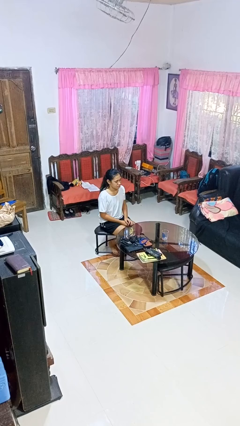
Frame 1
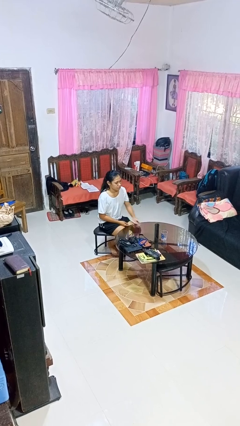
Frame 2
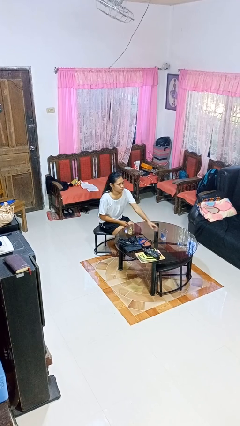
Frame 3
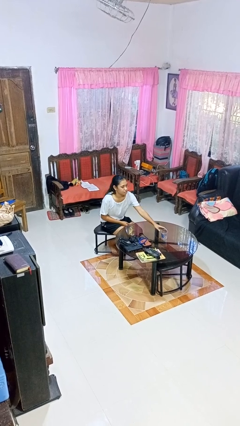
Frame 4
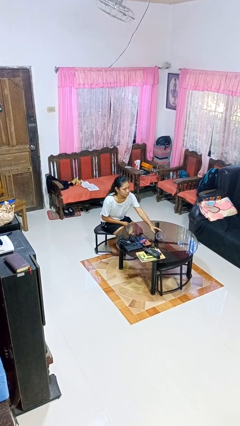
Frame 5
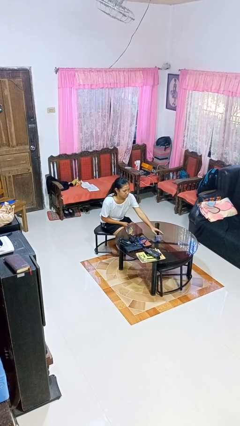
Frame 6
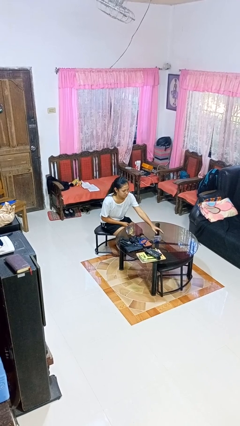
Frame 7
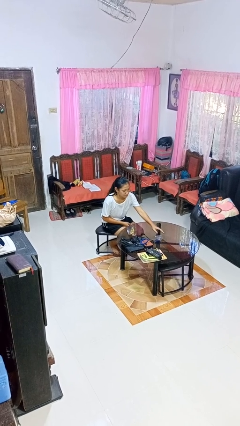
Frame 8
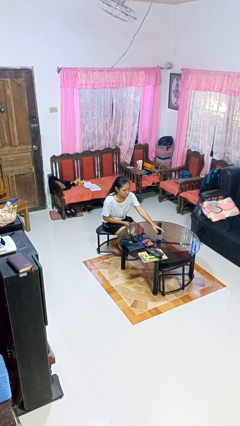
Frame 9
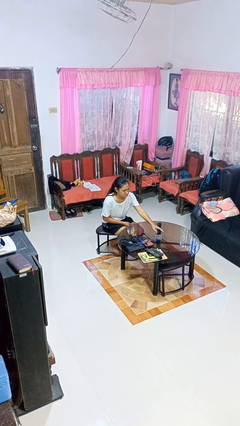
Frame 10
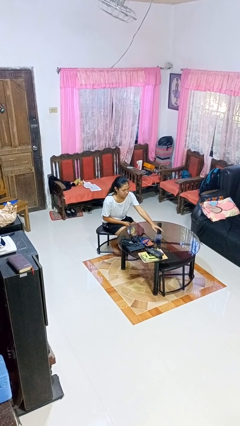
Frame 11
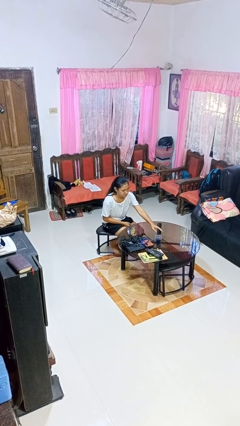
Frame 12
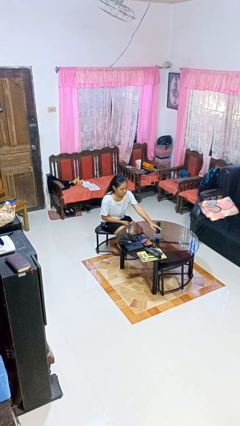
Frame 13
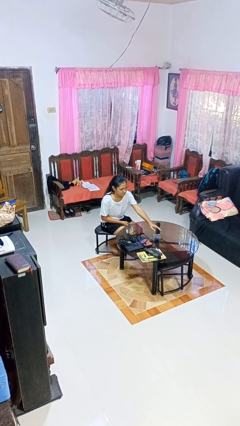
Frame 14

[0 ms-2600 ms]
person knocks over glass

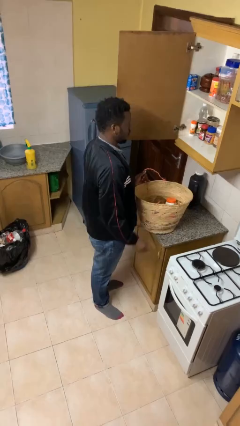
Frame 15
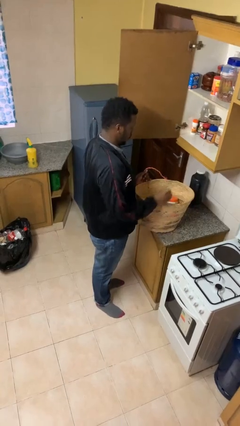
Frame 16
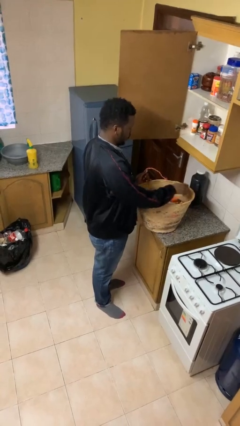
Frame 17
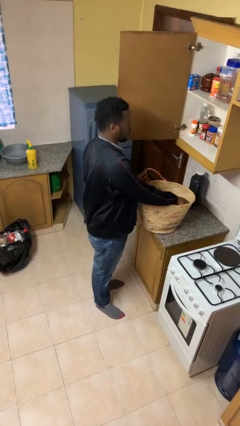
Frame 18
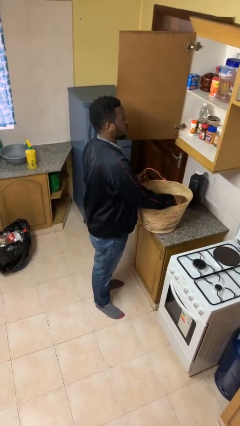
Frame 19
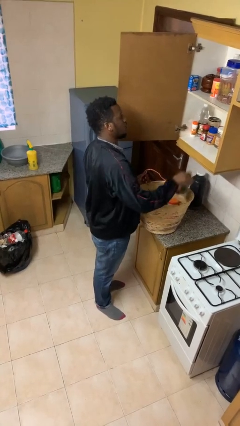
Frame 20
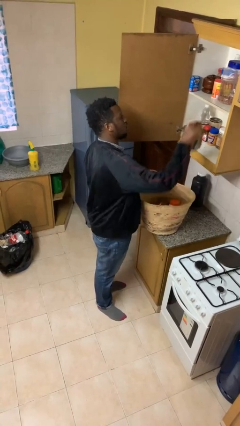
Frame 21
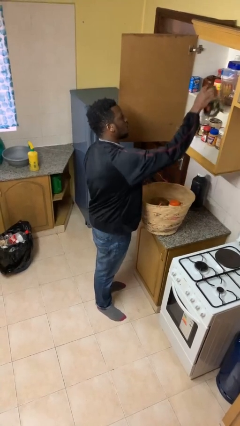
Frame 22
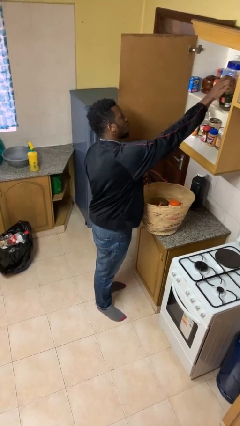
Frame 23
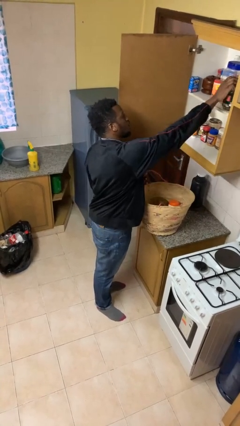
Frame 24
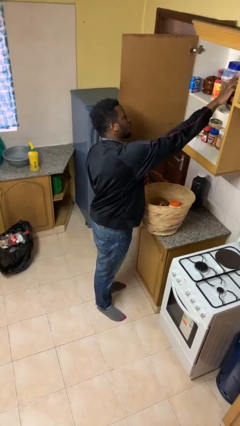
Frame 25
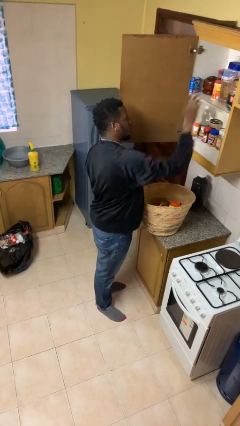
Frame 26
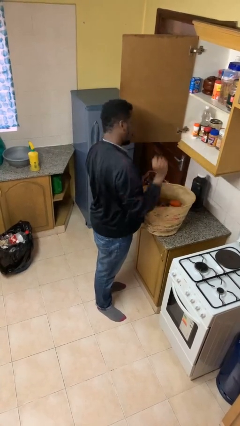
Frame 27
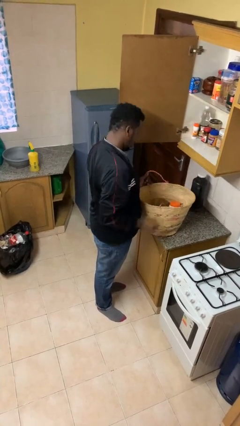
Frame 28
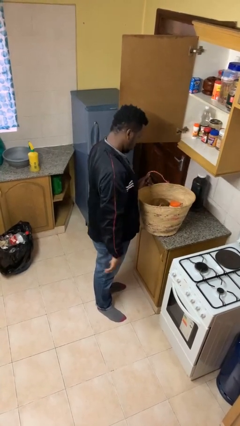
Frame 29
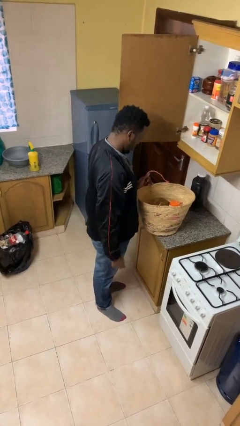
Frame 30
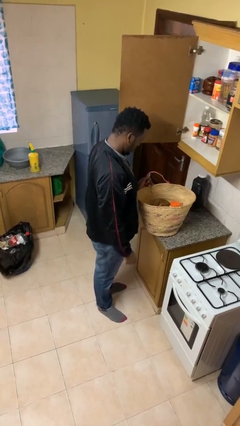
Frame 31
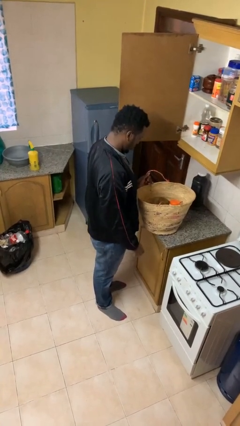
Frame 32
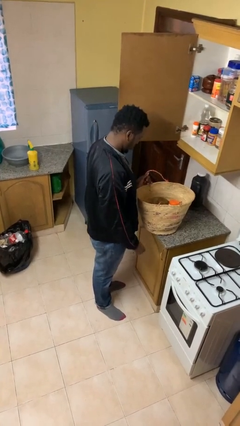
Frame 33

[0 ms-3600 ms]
person loads groceries into cabinet

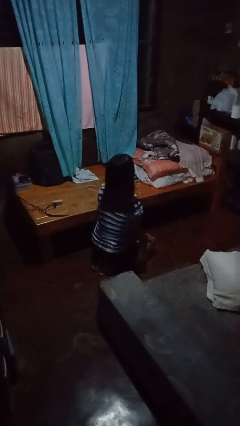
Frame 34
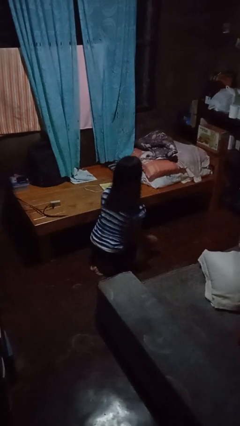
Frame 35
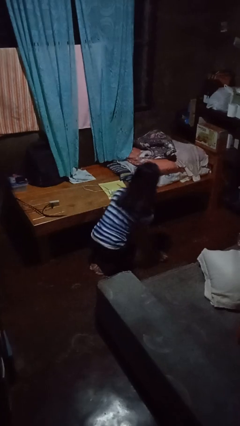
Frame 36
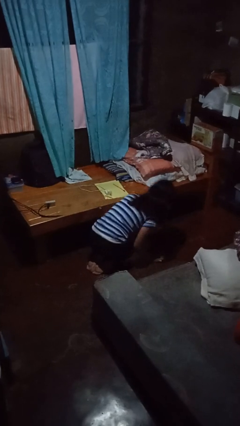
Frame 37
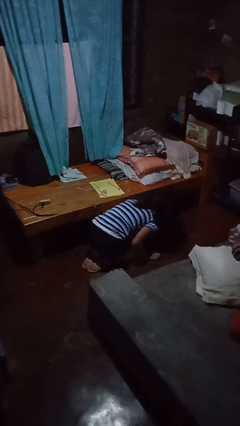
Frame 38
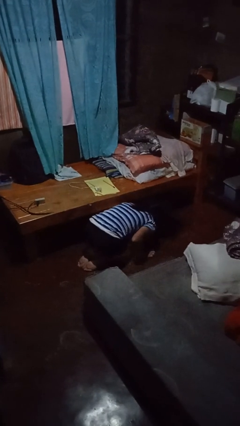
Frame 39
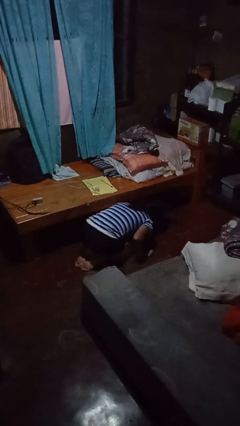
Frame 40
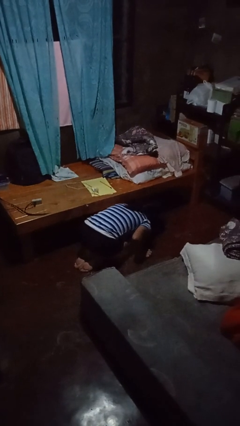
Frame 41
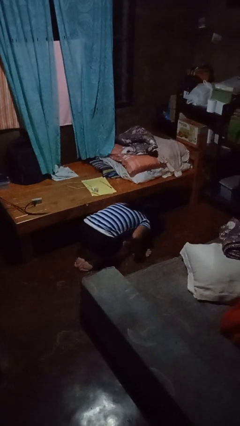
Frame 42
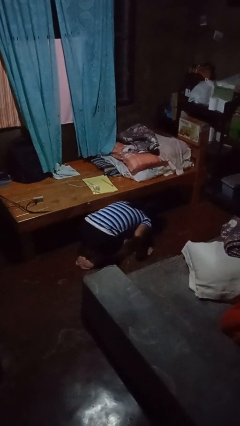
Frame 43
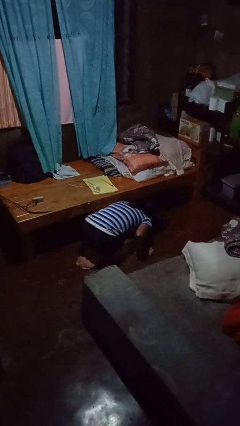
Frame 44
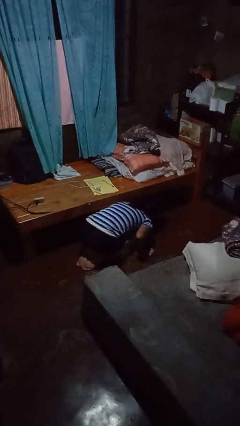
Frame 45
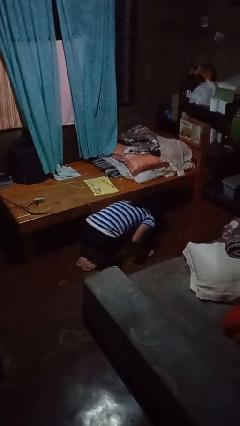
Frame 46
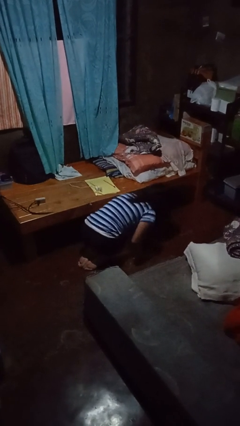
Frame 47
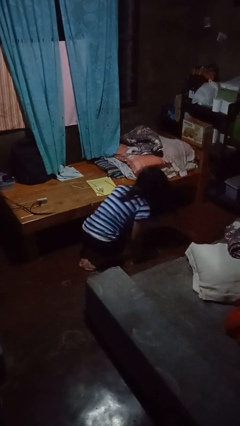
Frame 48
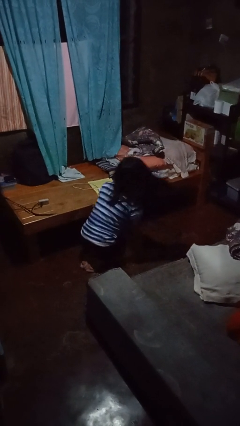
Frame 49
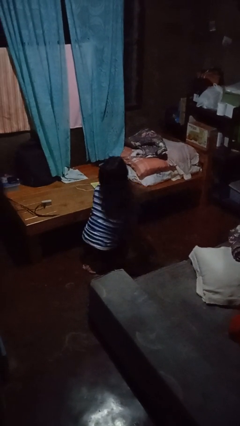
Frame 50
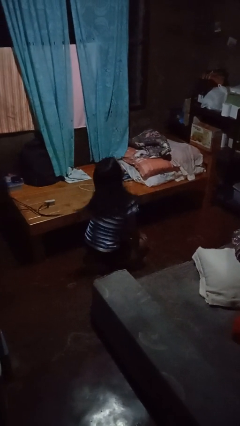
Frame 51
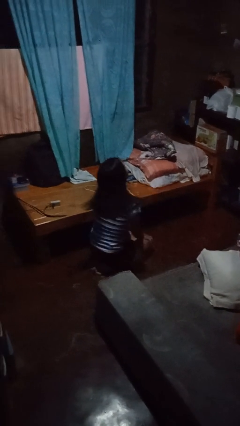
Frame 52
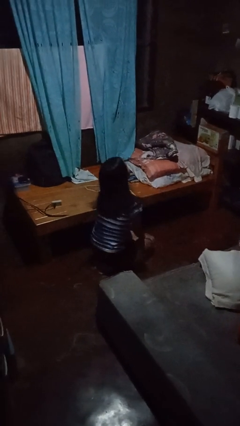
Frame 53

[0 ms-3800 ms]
person searches under bed

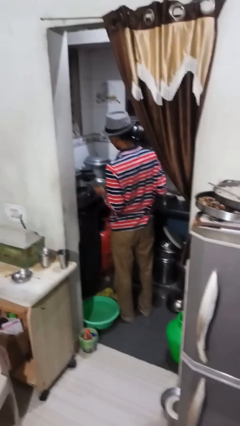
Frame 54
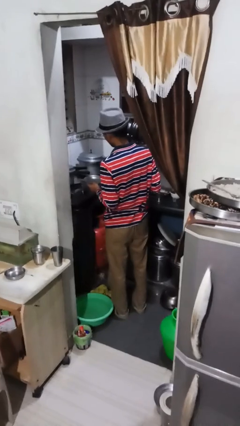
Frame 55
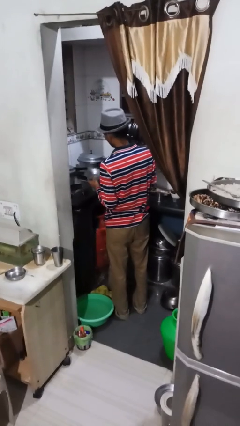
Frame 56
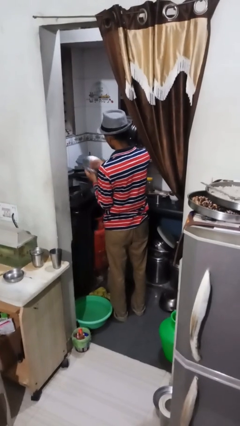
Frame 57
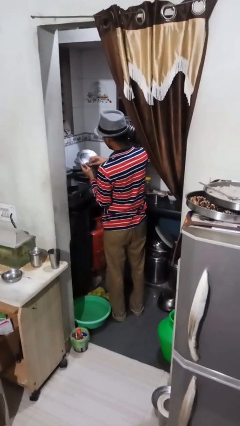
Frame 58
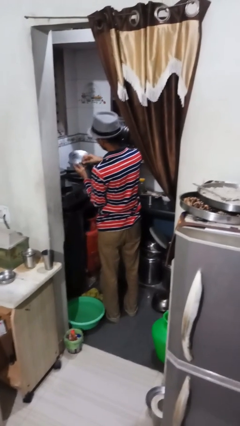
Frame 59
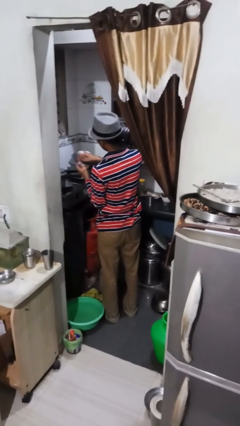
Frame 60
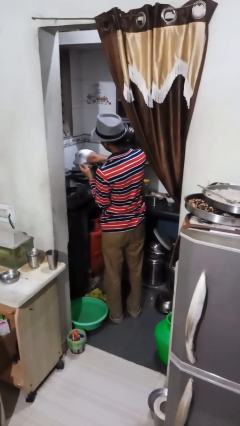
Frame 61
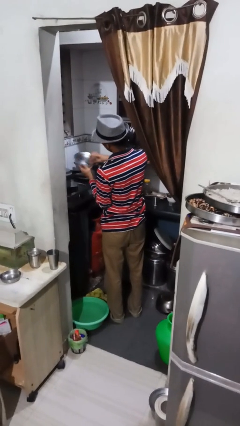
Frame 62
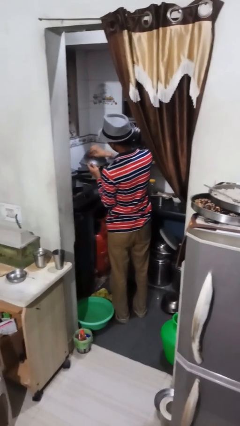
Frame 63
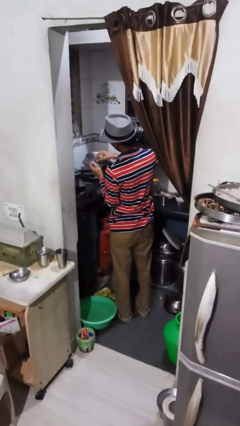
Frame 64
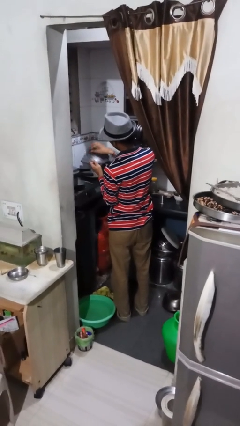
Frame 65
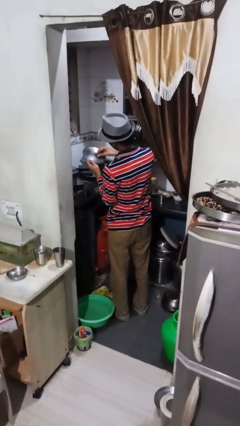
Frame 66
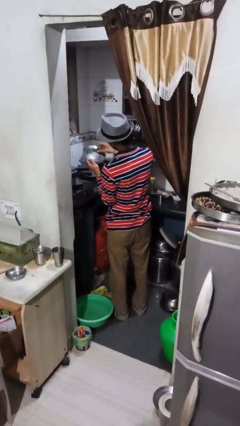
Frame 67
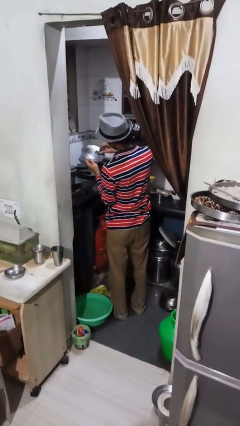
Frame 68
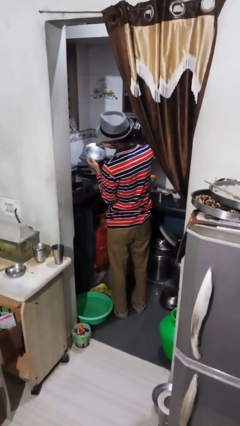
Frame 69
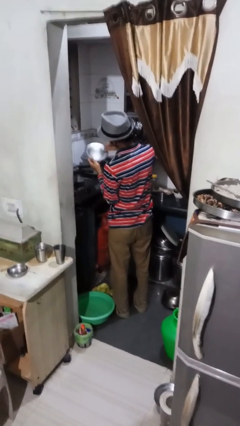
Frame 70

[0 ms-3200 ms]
person washes dish

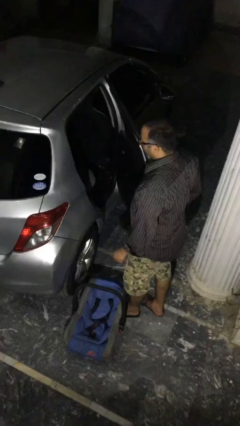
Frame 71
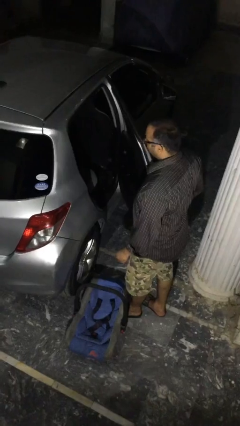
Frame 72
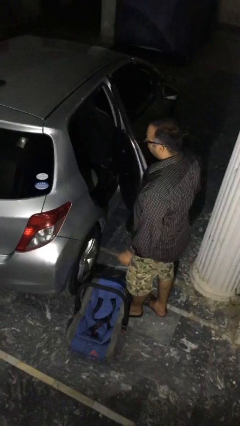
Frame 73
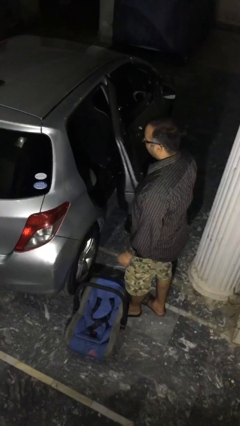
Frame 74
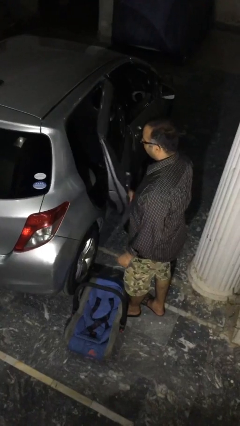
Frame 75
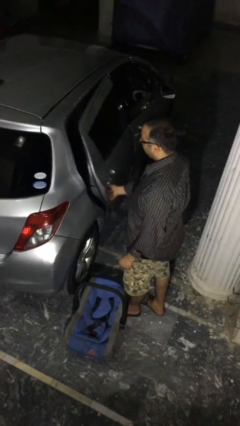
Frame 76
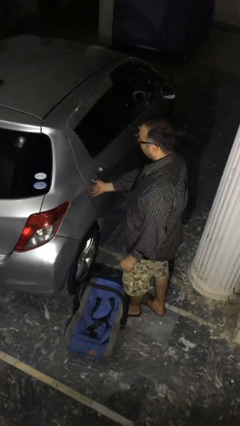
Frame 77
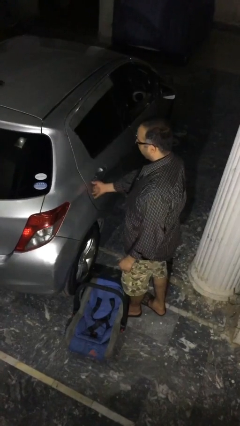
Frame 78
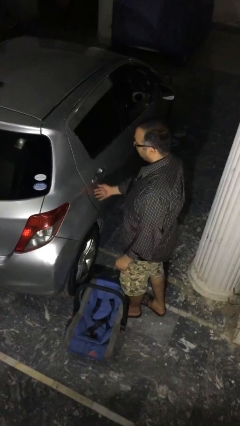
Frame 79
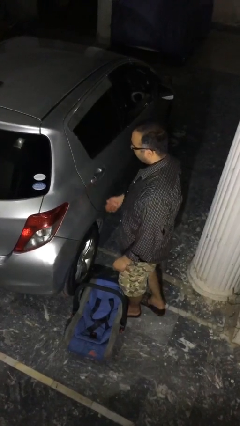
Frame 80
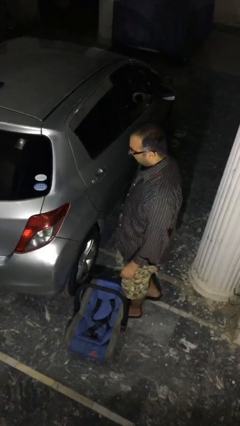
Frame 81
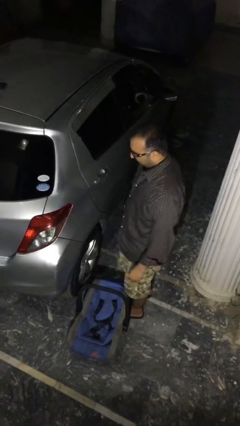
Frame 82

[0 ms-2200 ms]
person closes car door

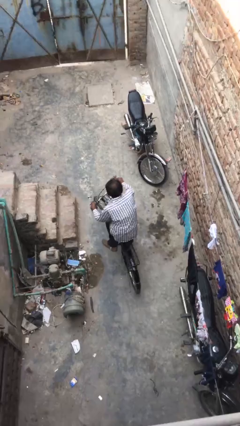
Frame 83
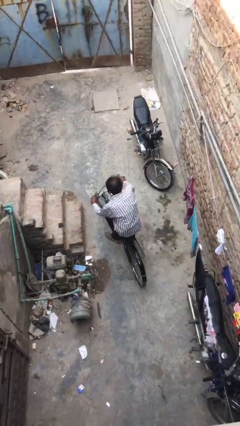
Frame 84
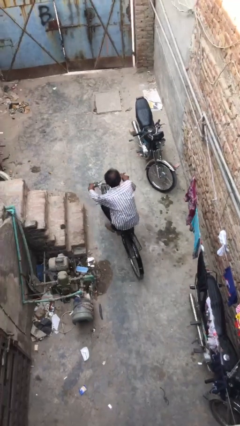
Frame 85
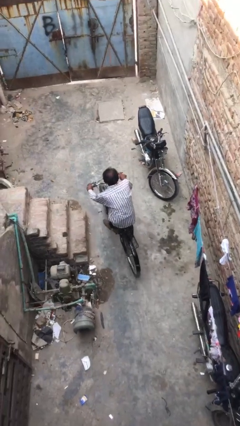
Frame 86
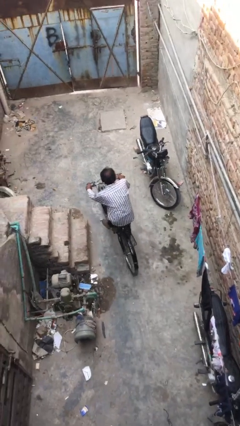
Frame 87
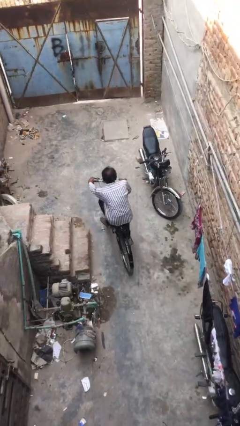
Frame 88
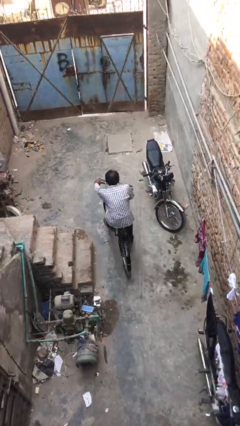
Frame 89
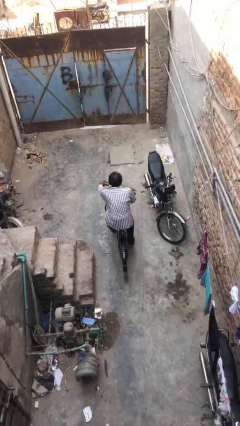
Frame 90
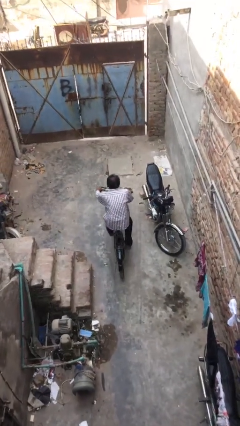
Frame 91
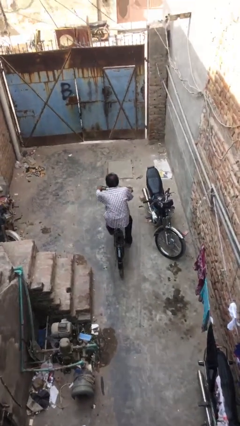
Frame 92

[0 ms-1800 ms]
person rides bicycle

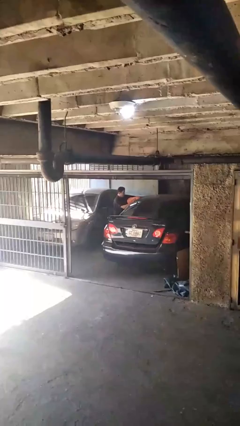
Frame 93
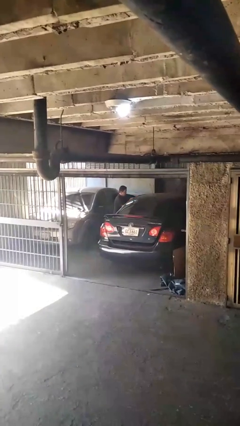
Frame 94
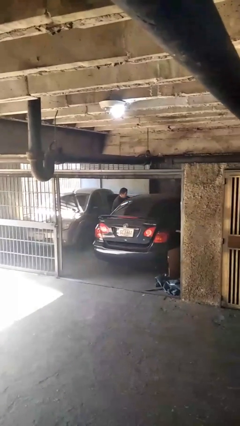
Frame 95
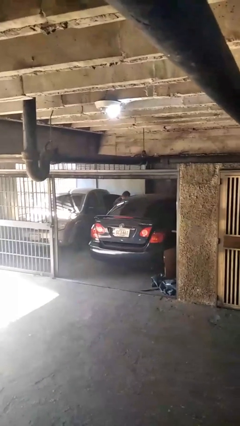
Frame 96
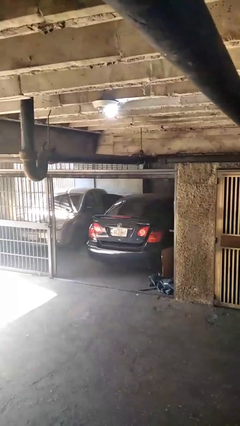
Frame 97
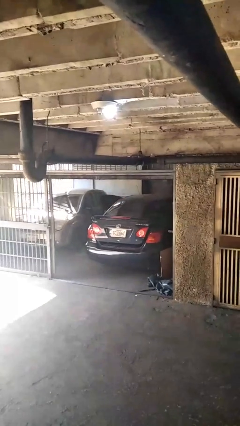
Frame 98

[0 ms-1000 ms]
person loads car
